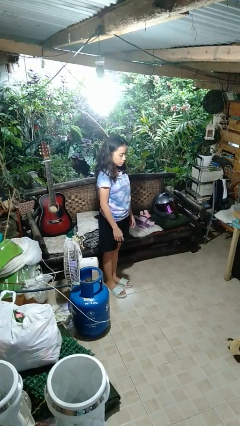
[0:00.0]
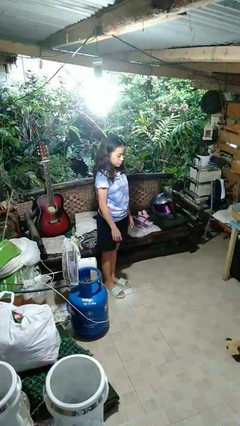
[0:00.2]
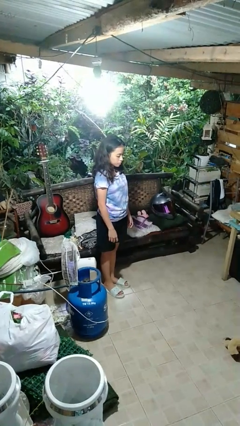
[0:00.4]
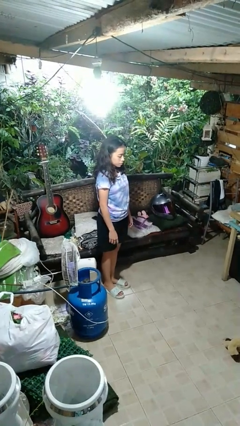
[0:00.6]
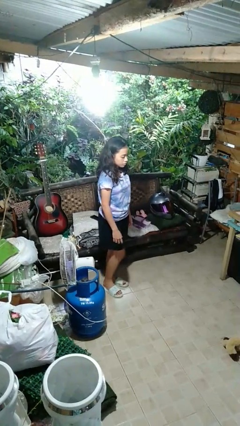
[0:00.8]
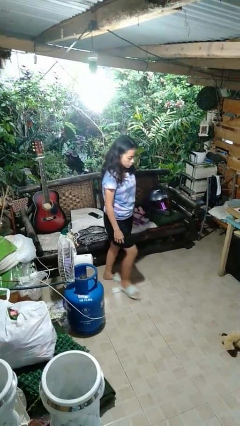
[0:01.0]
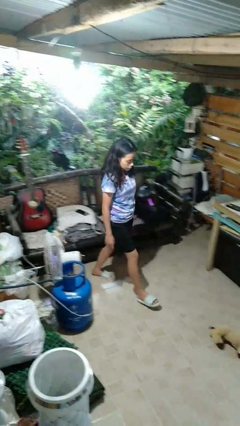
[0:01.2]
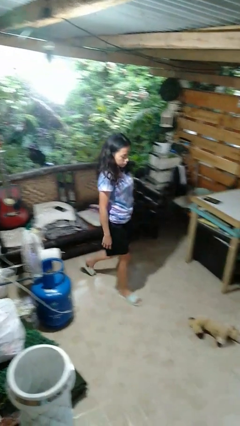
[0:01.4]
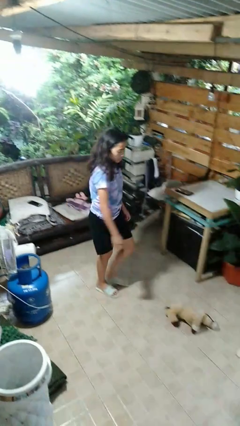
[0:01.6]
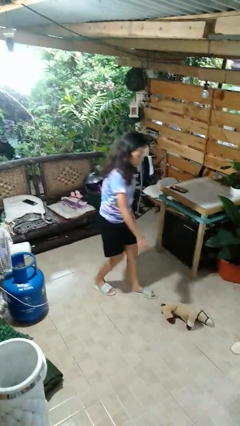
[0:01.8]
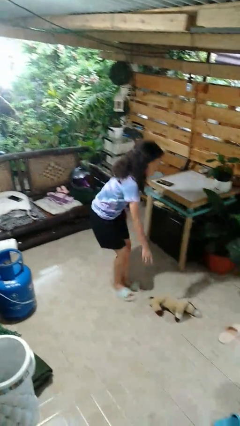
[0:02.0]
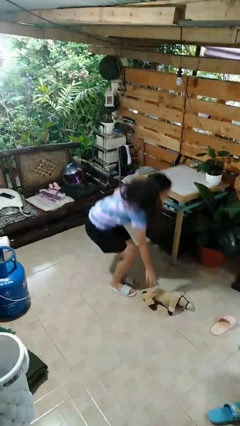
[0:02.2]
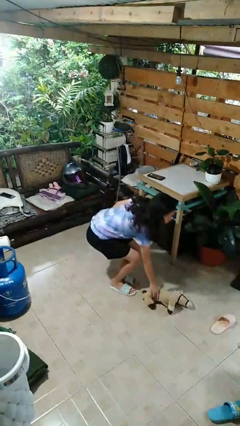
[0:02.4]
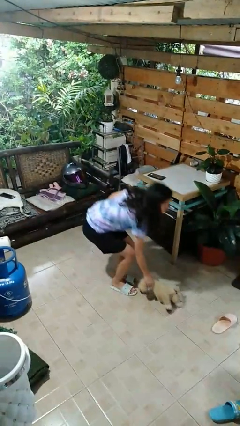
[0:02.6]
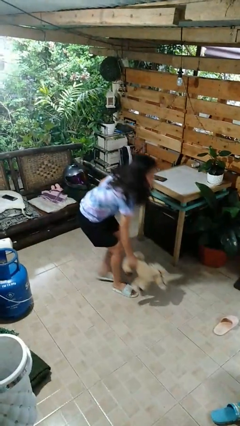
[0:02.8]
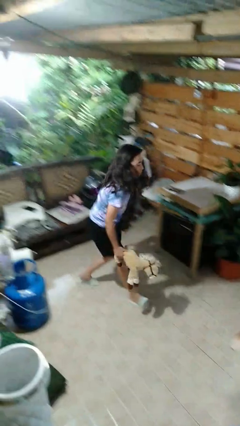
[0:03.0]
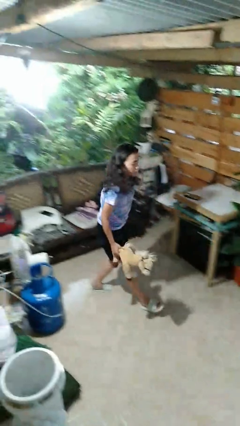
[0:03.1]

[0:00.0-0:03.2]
person picks up object from floor

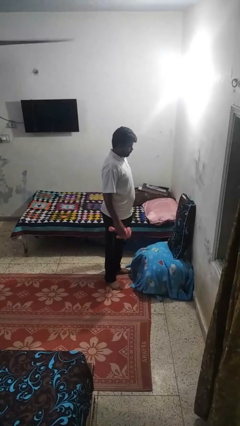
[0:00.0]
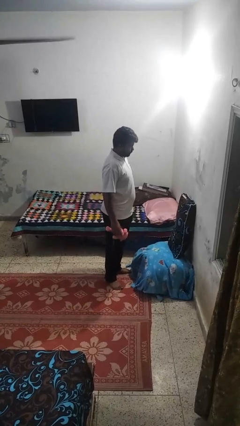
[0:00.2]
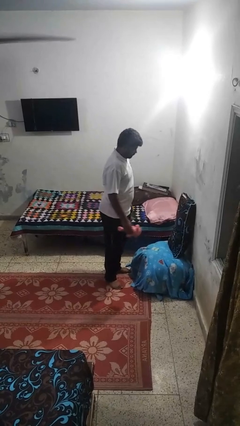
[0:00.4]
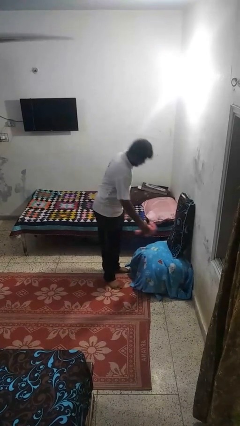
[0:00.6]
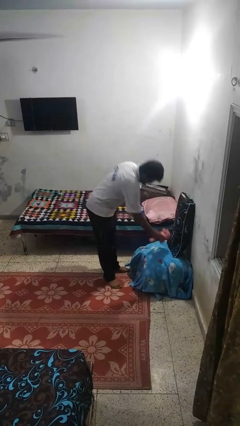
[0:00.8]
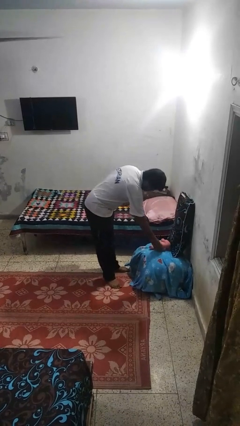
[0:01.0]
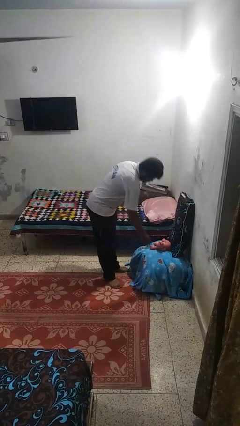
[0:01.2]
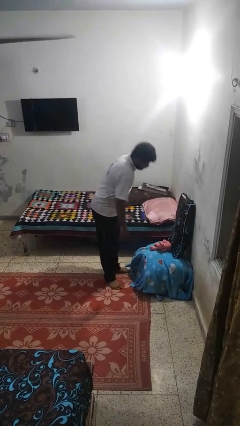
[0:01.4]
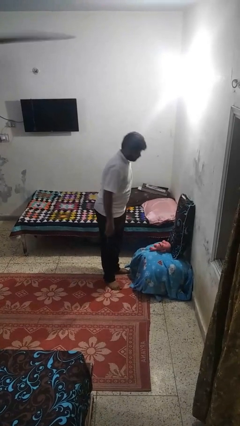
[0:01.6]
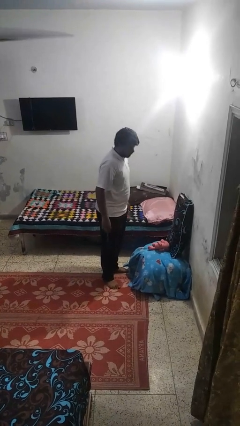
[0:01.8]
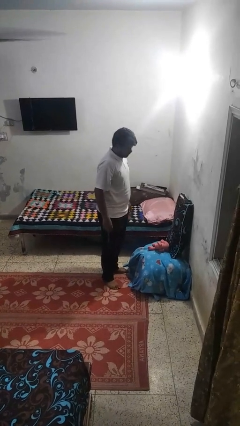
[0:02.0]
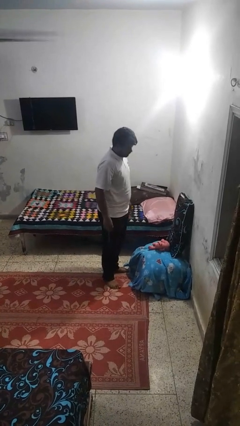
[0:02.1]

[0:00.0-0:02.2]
person puts down object on couch

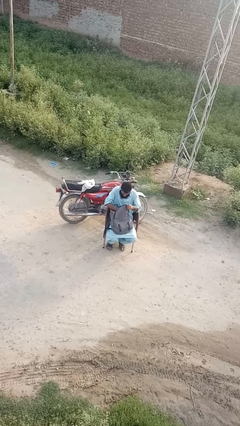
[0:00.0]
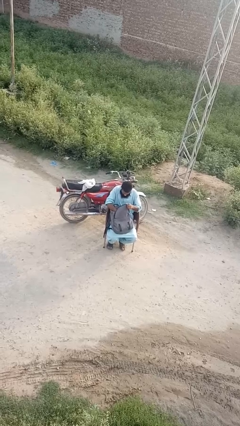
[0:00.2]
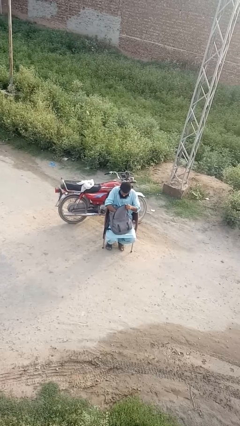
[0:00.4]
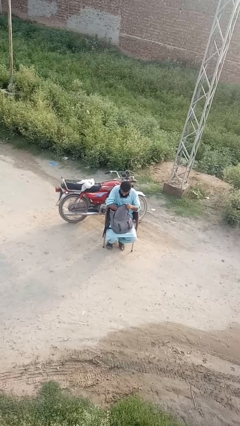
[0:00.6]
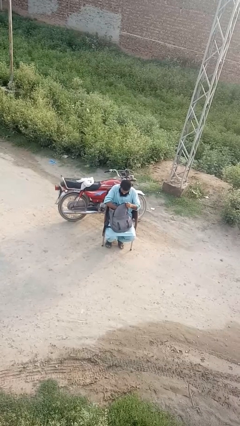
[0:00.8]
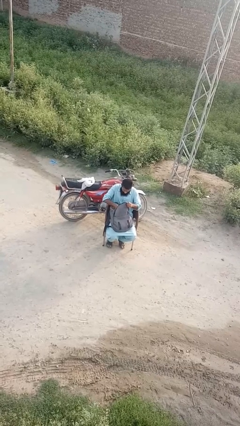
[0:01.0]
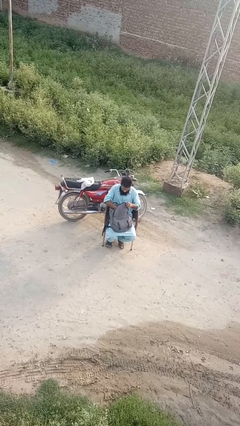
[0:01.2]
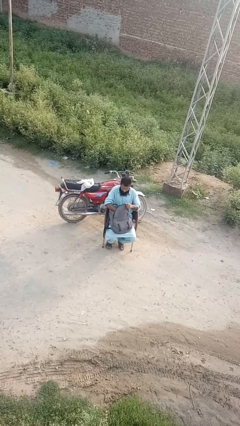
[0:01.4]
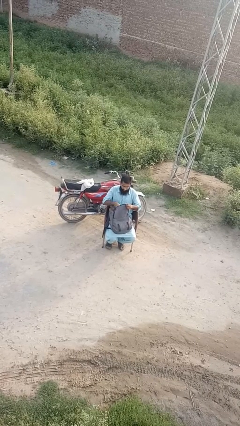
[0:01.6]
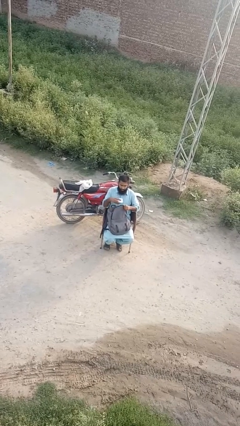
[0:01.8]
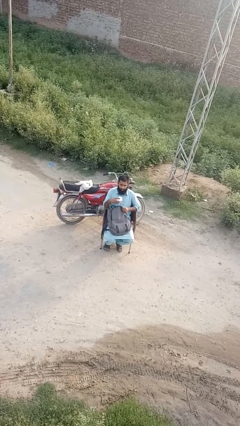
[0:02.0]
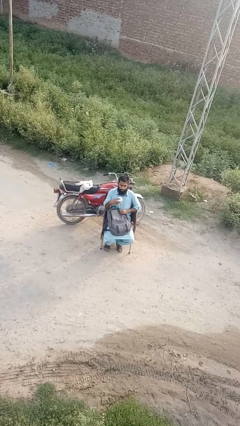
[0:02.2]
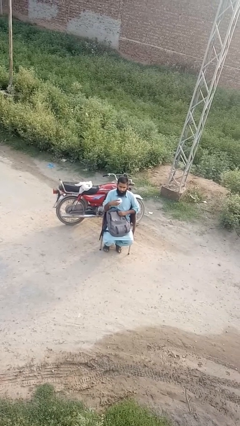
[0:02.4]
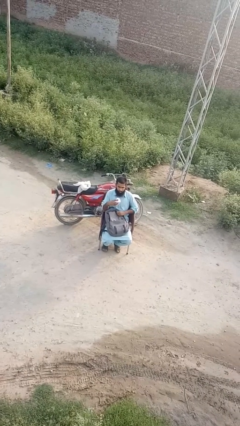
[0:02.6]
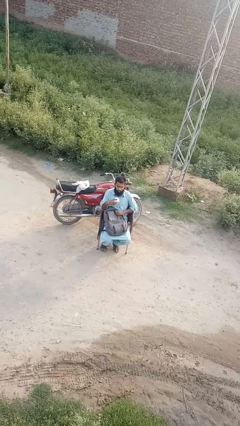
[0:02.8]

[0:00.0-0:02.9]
person takes object from backpack

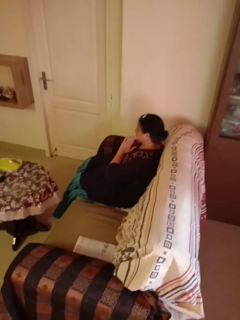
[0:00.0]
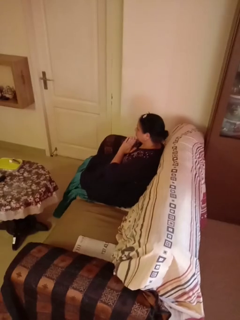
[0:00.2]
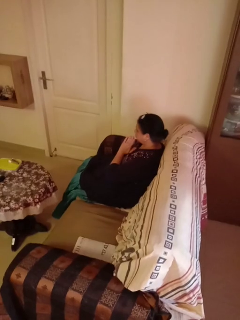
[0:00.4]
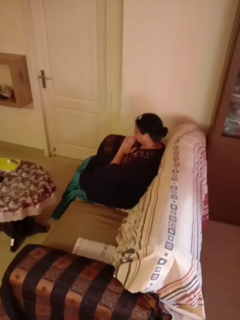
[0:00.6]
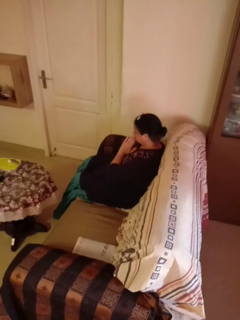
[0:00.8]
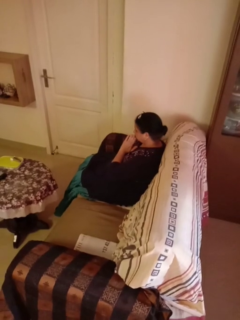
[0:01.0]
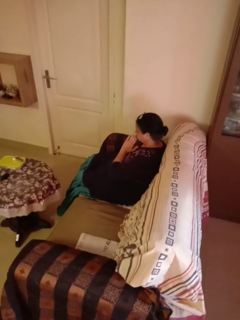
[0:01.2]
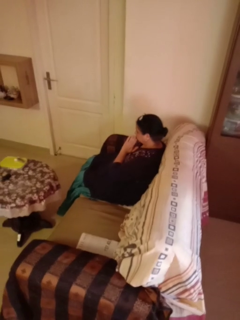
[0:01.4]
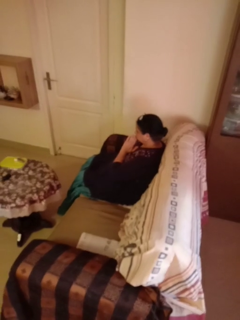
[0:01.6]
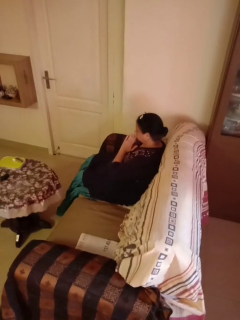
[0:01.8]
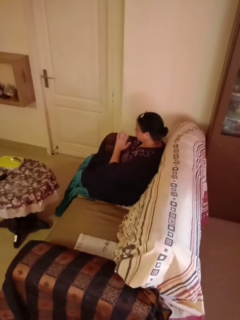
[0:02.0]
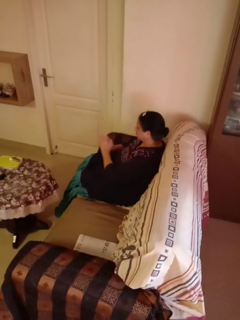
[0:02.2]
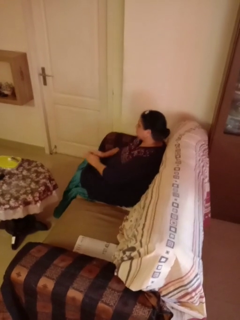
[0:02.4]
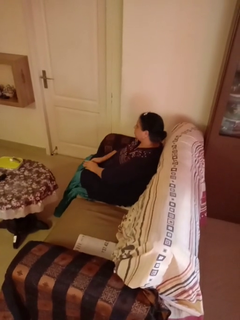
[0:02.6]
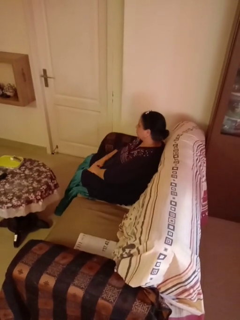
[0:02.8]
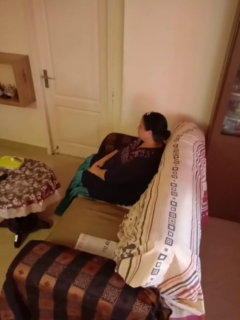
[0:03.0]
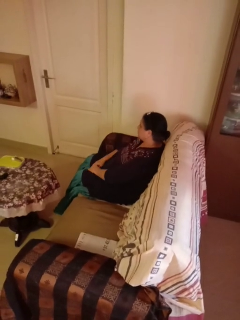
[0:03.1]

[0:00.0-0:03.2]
person prays

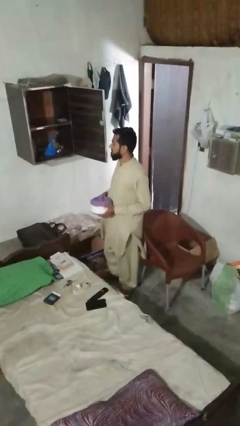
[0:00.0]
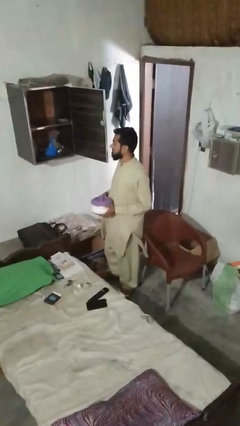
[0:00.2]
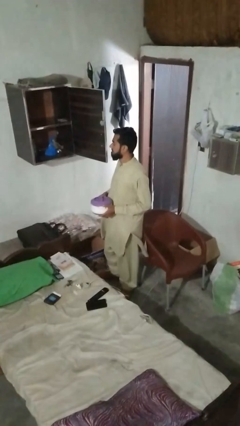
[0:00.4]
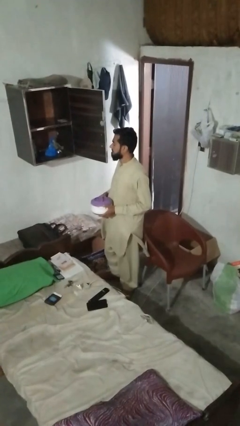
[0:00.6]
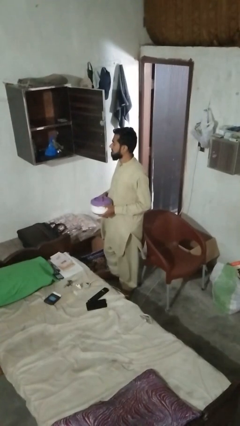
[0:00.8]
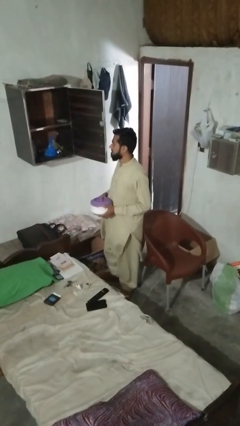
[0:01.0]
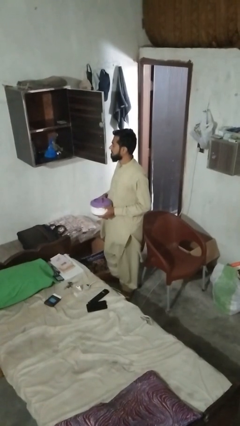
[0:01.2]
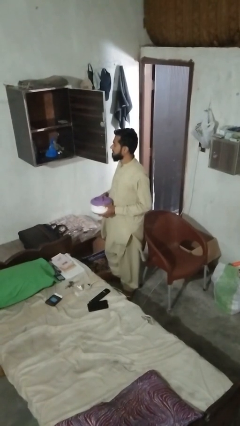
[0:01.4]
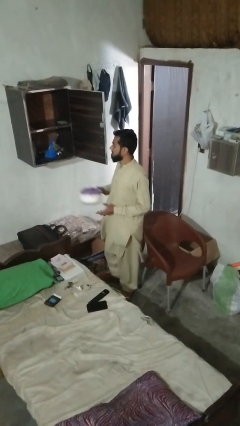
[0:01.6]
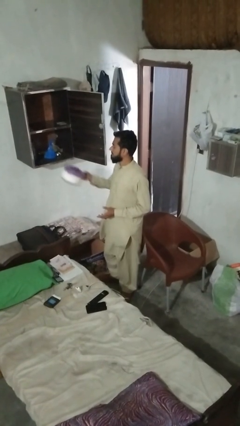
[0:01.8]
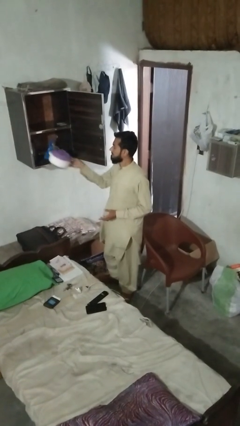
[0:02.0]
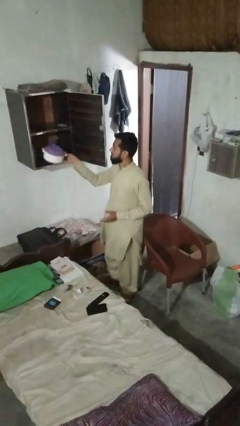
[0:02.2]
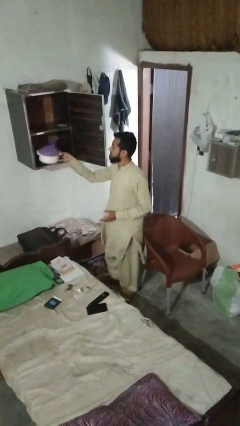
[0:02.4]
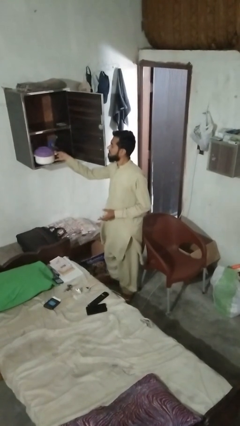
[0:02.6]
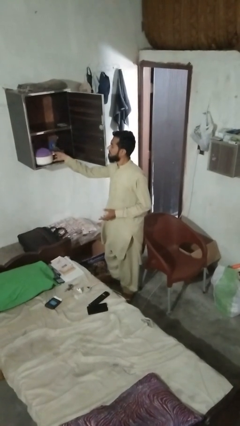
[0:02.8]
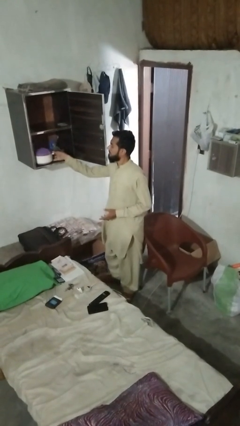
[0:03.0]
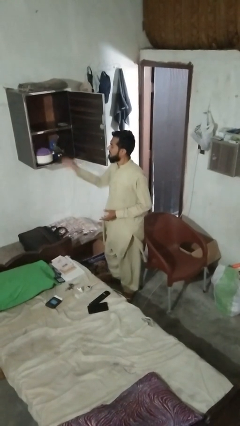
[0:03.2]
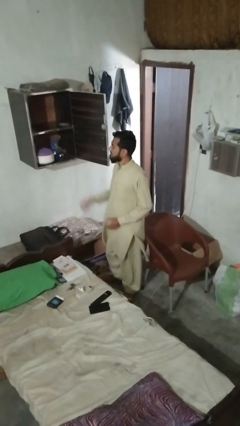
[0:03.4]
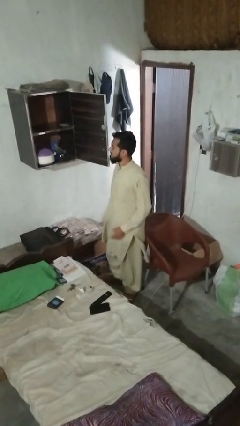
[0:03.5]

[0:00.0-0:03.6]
person loads groceries into cabinet

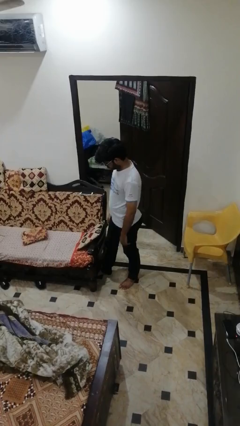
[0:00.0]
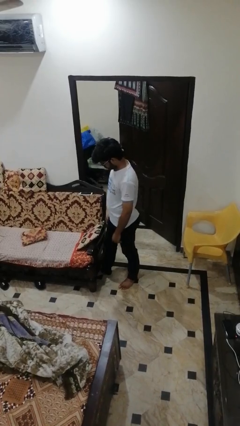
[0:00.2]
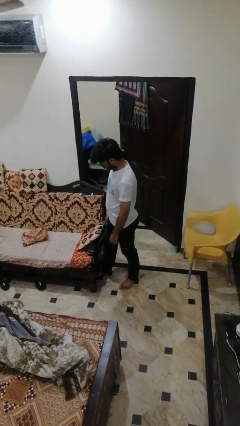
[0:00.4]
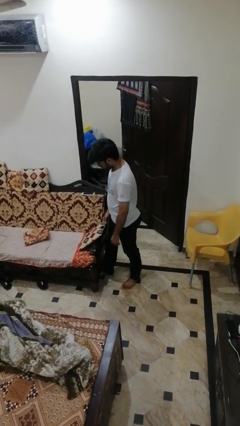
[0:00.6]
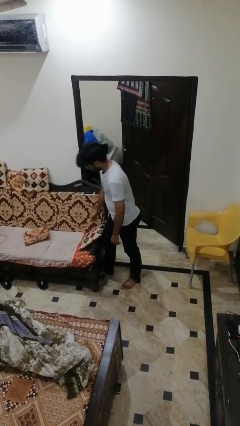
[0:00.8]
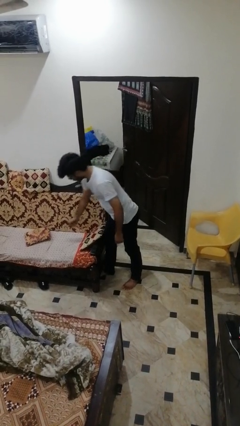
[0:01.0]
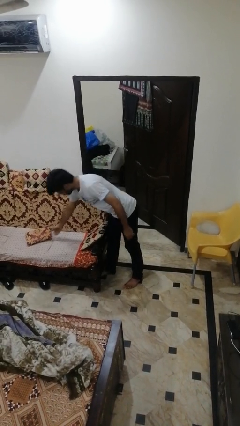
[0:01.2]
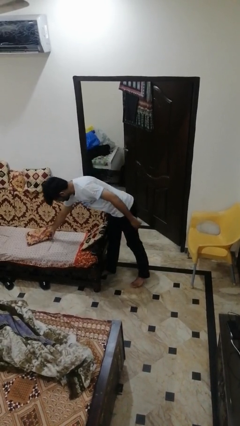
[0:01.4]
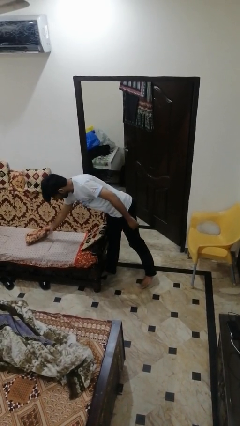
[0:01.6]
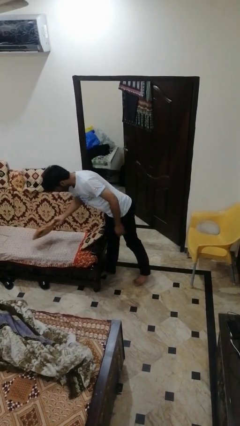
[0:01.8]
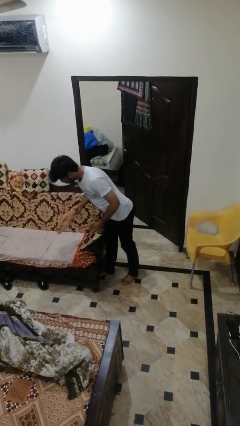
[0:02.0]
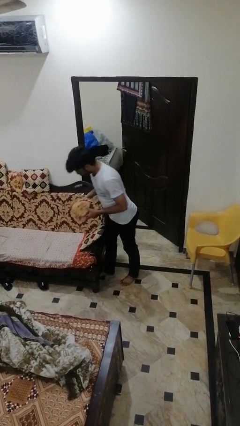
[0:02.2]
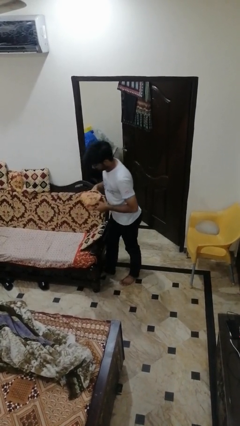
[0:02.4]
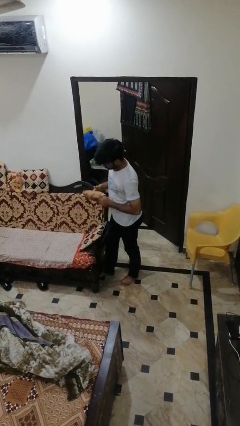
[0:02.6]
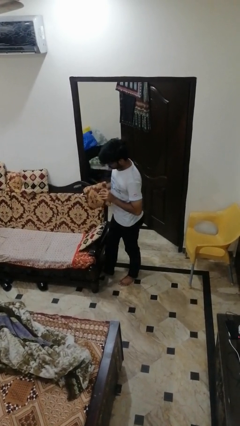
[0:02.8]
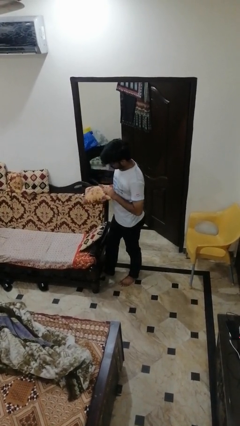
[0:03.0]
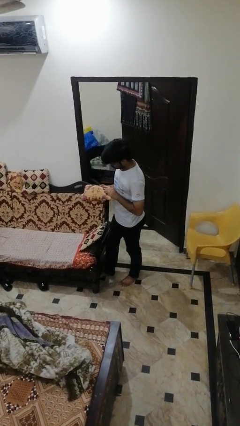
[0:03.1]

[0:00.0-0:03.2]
person picks up object from couch
